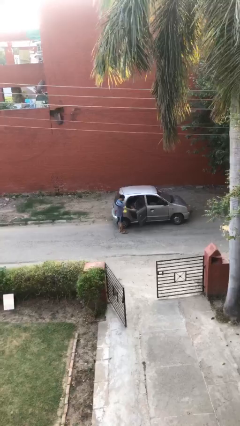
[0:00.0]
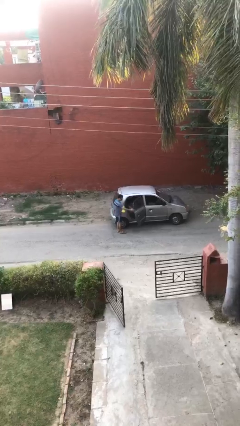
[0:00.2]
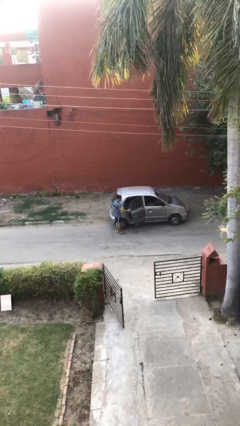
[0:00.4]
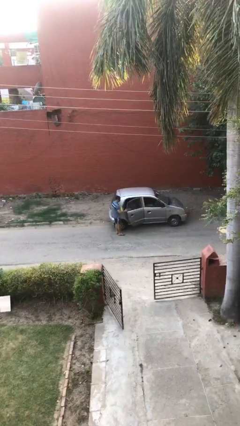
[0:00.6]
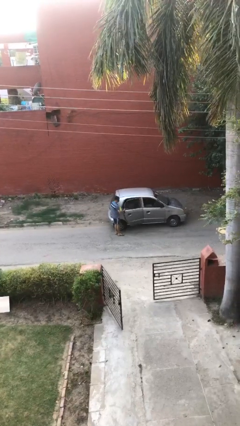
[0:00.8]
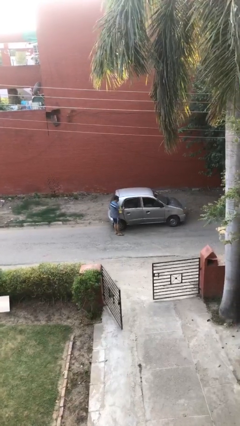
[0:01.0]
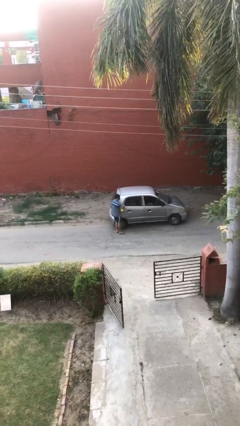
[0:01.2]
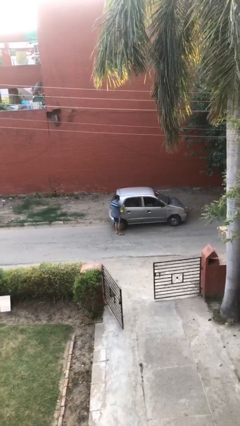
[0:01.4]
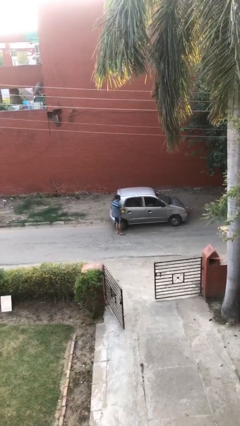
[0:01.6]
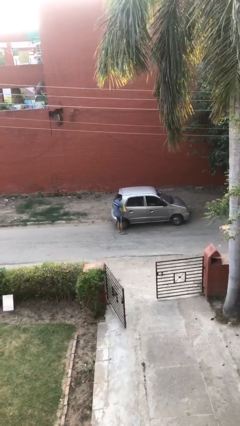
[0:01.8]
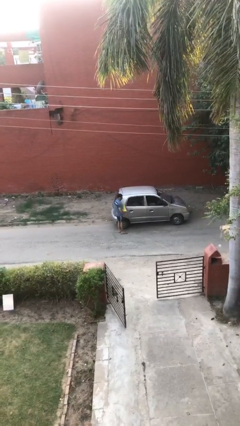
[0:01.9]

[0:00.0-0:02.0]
person closes car door

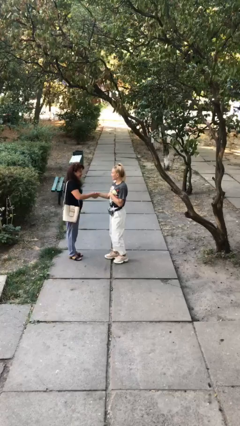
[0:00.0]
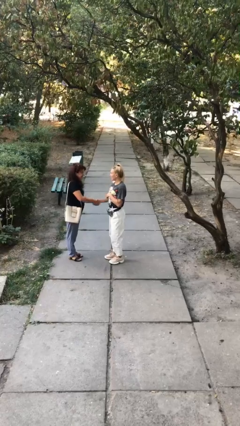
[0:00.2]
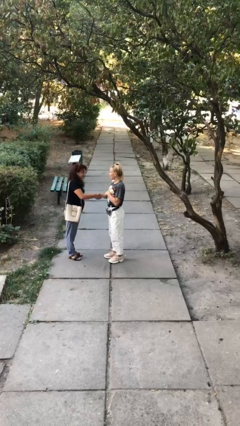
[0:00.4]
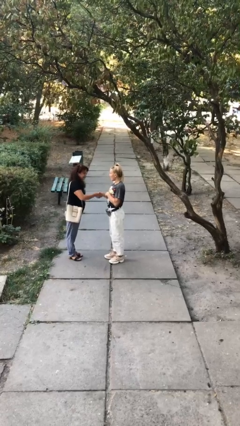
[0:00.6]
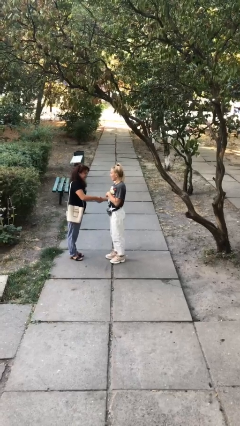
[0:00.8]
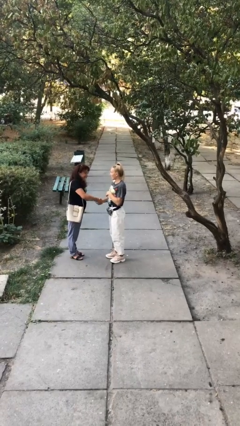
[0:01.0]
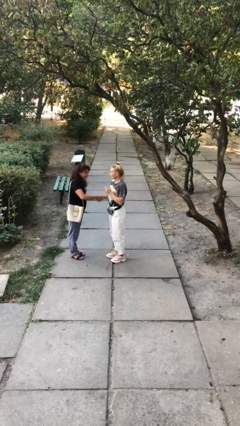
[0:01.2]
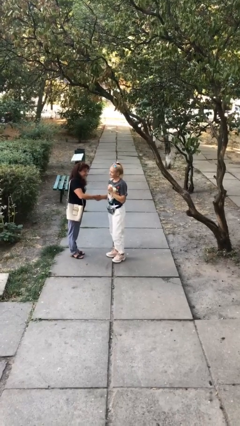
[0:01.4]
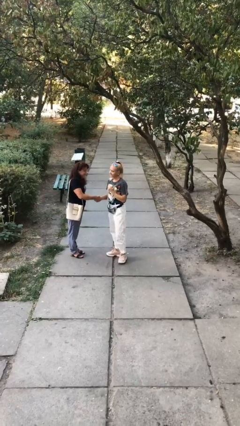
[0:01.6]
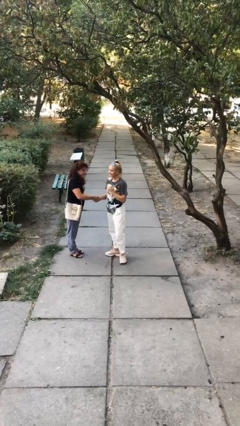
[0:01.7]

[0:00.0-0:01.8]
person shakes hand

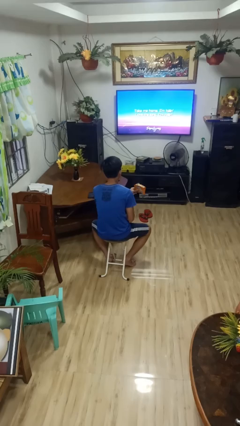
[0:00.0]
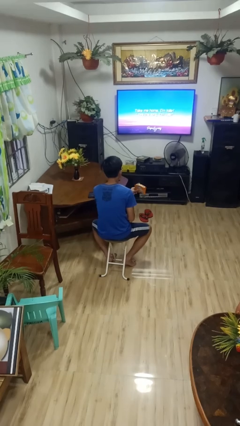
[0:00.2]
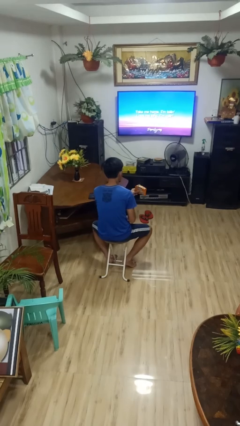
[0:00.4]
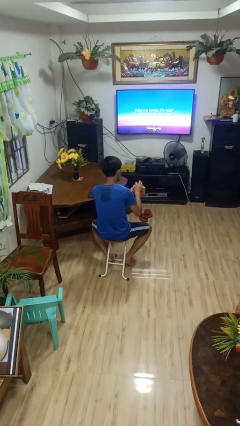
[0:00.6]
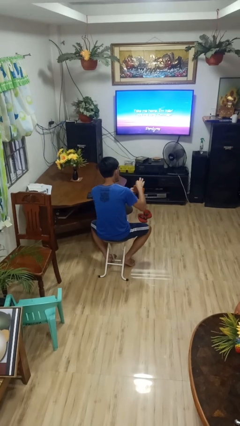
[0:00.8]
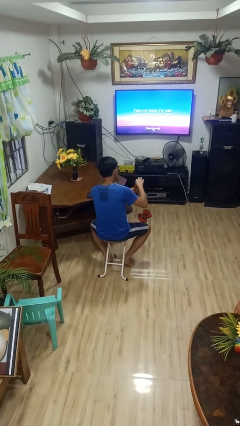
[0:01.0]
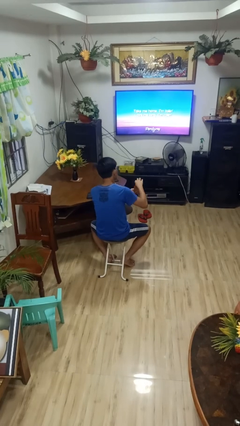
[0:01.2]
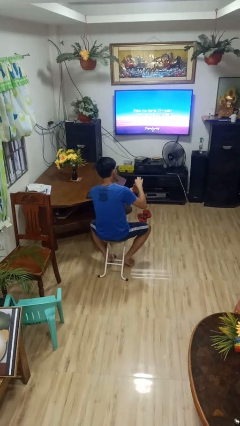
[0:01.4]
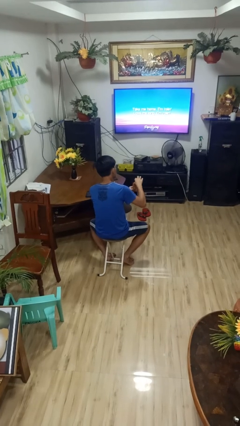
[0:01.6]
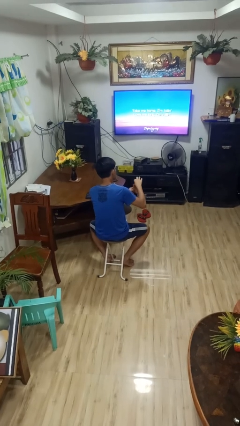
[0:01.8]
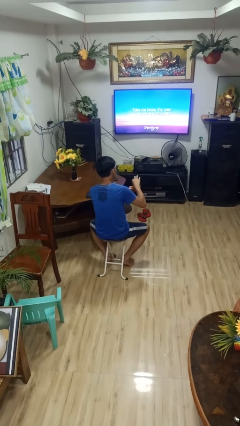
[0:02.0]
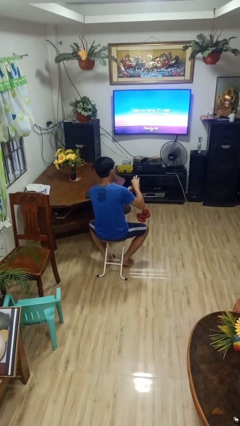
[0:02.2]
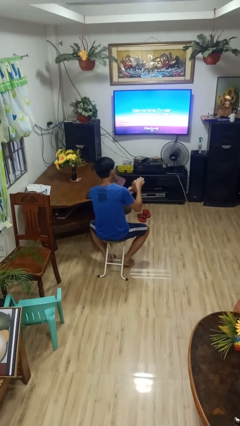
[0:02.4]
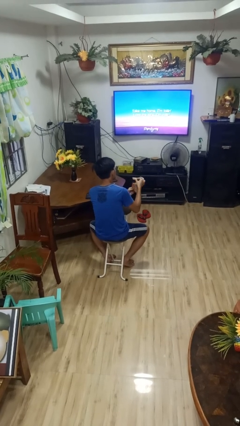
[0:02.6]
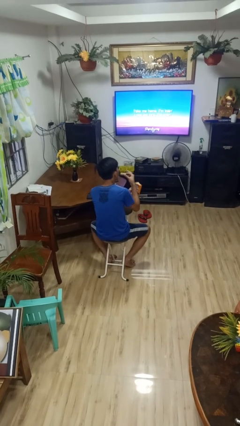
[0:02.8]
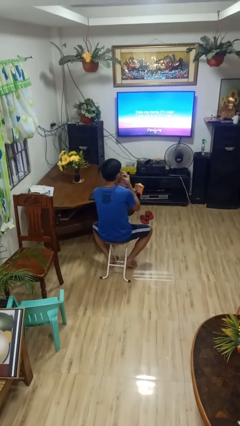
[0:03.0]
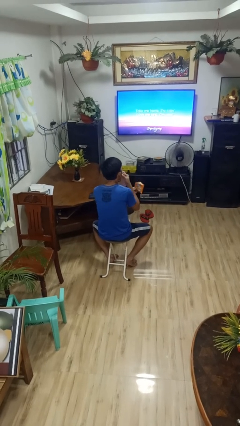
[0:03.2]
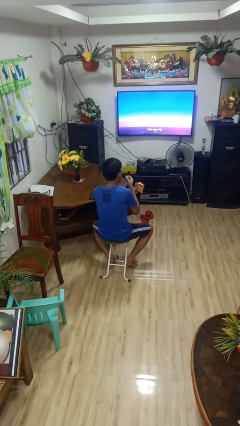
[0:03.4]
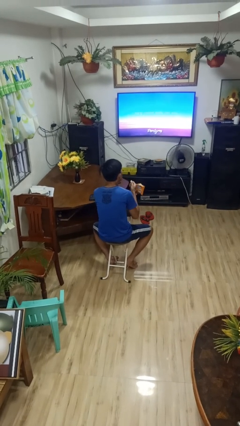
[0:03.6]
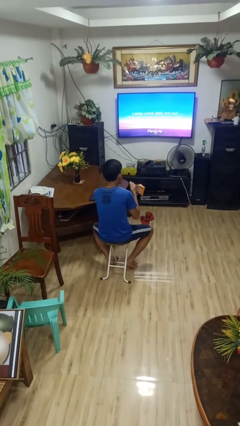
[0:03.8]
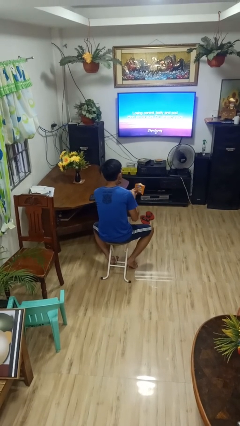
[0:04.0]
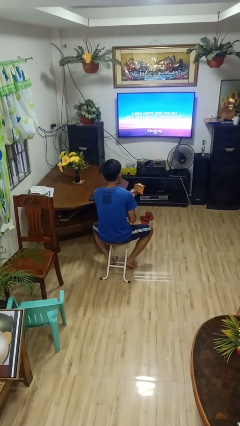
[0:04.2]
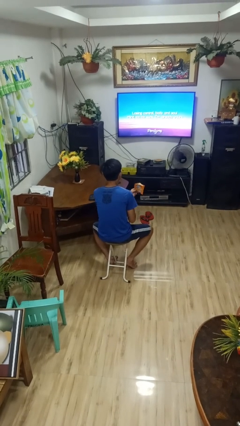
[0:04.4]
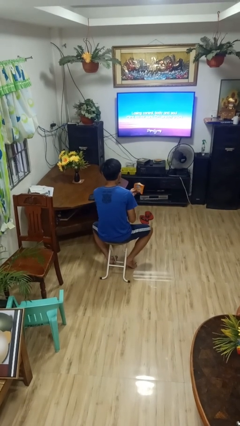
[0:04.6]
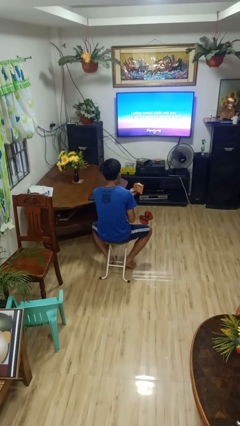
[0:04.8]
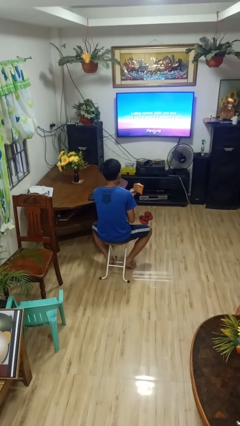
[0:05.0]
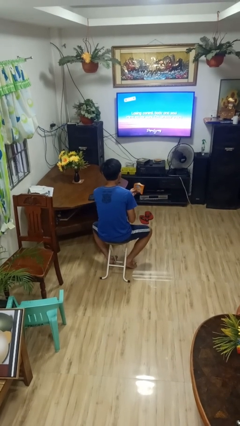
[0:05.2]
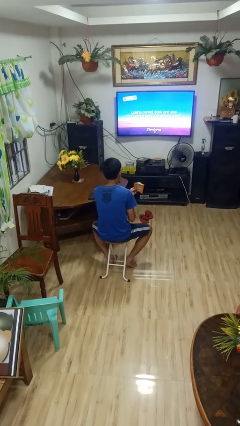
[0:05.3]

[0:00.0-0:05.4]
person eats snack from bag

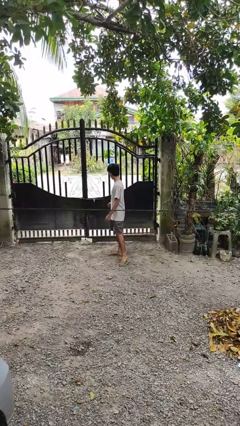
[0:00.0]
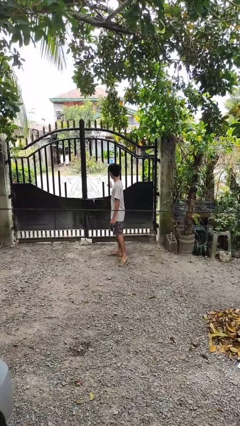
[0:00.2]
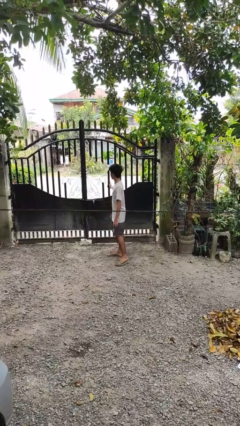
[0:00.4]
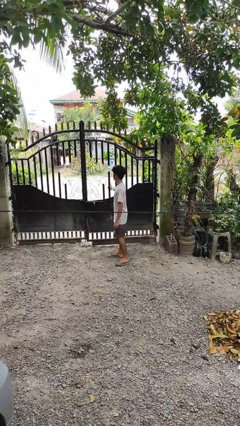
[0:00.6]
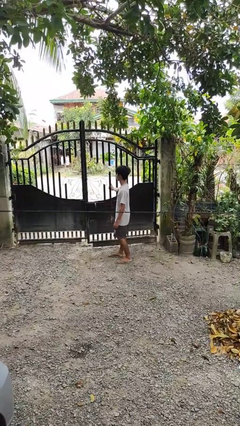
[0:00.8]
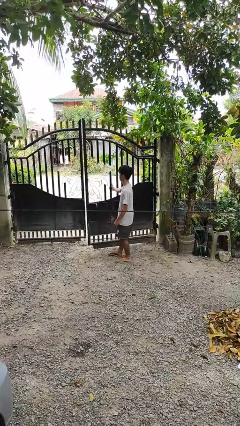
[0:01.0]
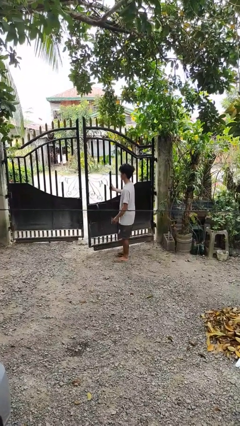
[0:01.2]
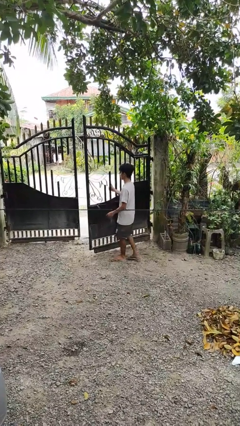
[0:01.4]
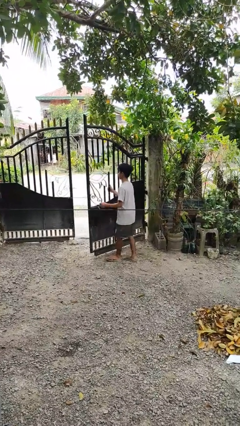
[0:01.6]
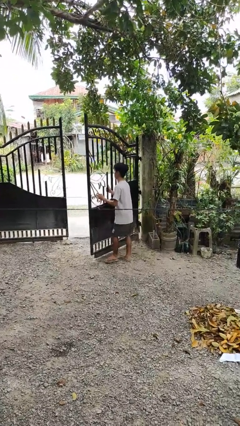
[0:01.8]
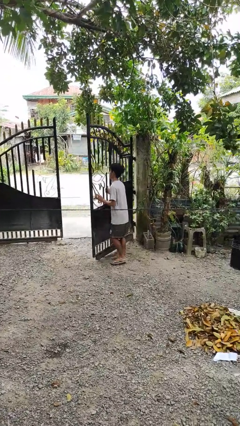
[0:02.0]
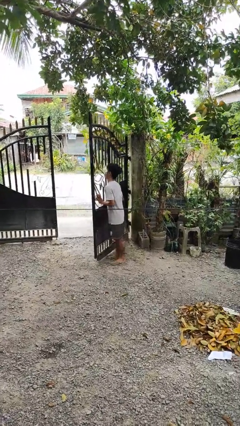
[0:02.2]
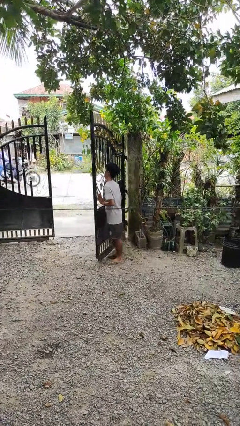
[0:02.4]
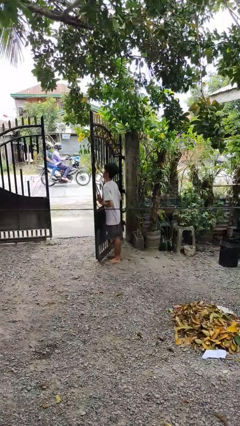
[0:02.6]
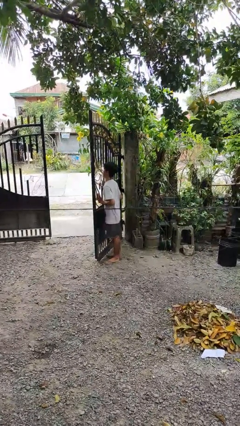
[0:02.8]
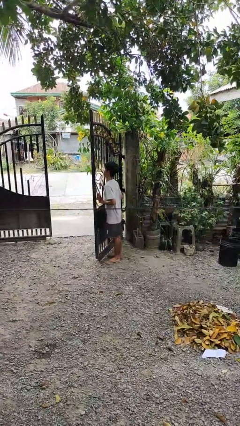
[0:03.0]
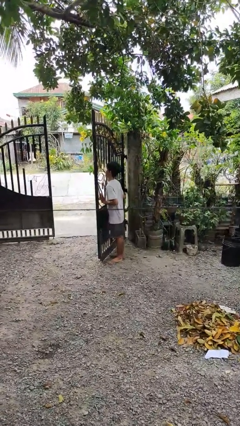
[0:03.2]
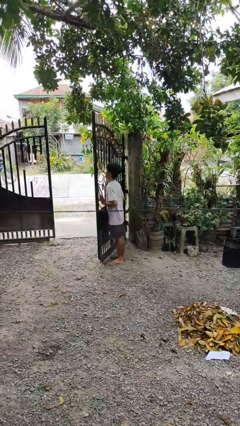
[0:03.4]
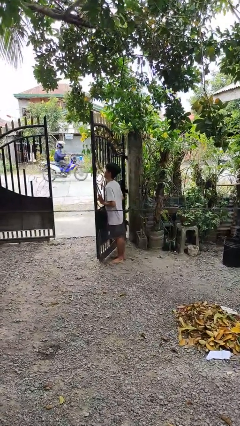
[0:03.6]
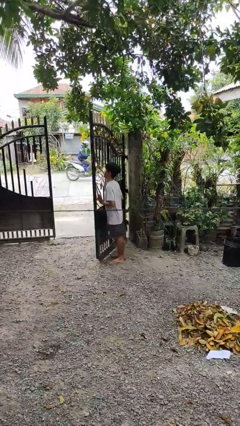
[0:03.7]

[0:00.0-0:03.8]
person opens gate

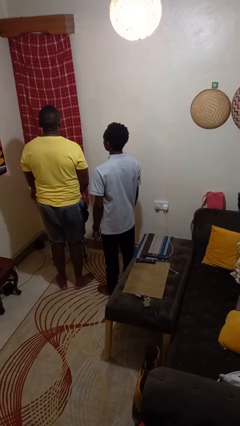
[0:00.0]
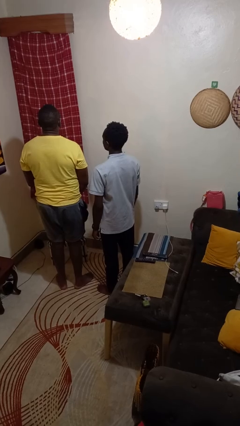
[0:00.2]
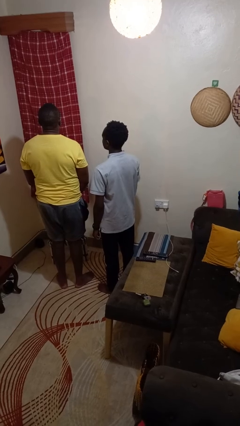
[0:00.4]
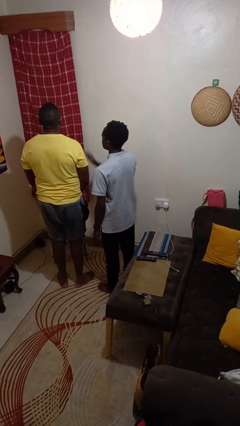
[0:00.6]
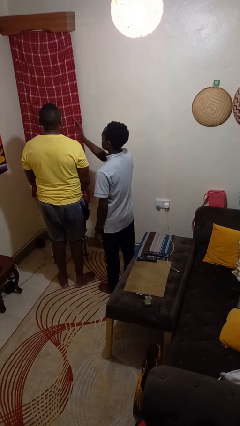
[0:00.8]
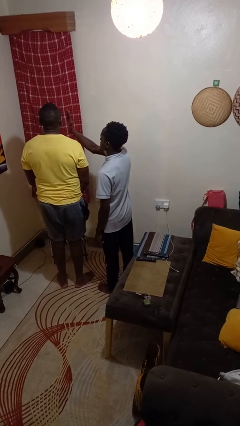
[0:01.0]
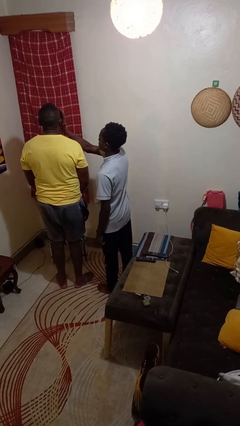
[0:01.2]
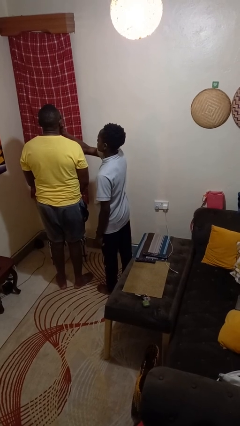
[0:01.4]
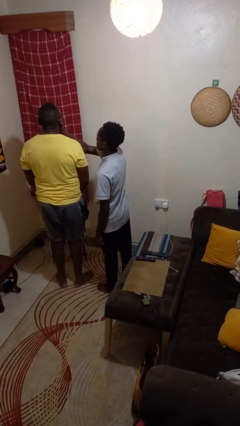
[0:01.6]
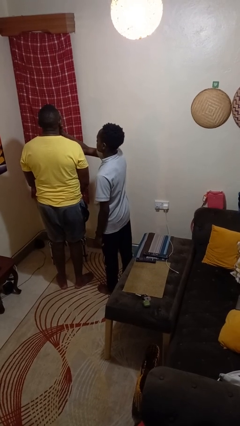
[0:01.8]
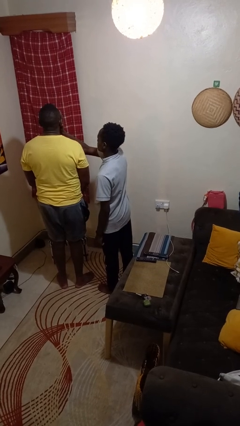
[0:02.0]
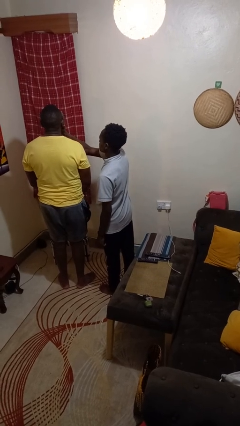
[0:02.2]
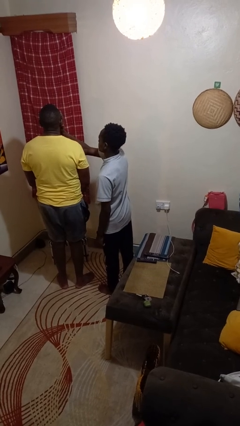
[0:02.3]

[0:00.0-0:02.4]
person touches face of person

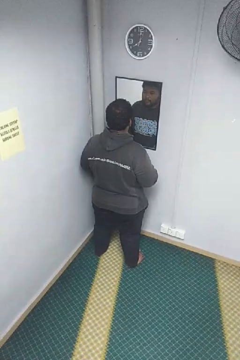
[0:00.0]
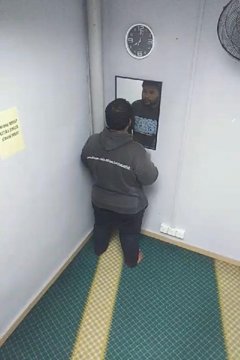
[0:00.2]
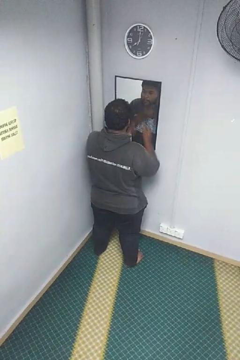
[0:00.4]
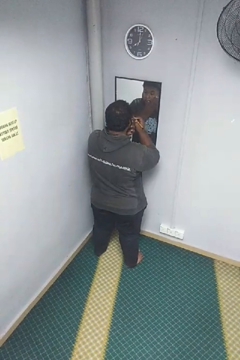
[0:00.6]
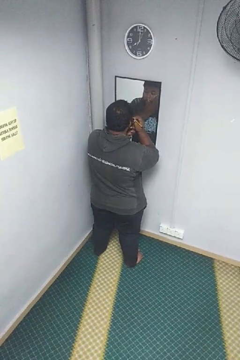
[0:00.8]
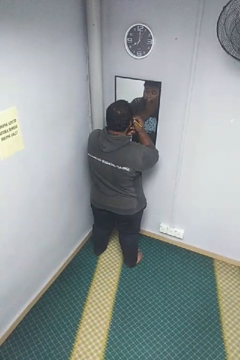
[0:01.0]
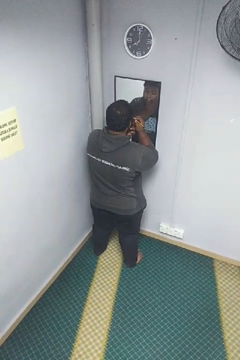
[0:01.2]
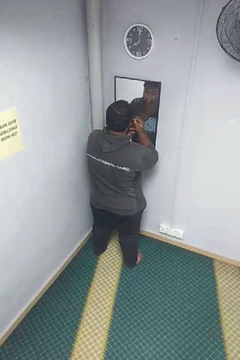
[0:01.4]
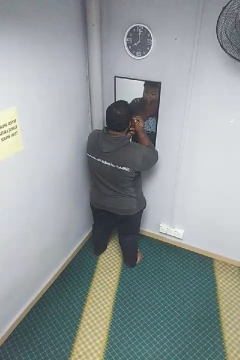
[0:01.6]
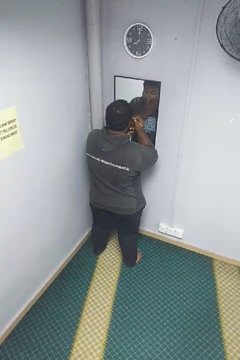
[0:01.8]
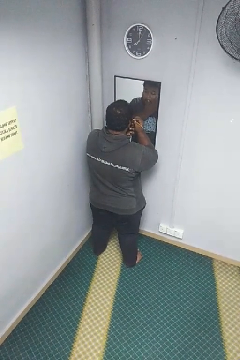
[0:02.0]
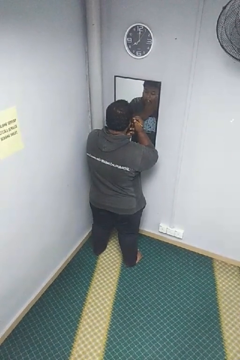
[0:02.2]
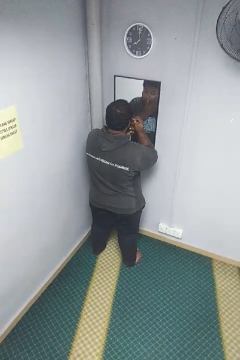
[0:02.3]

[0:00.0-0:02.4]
person applies eye makeup
